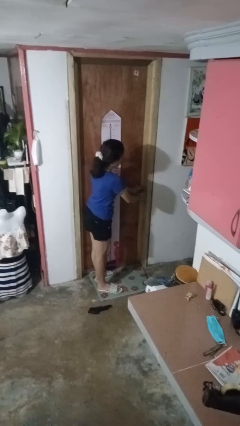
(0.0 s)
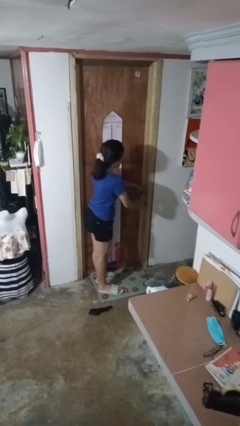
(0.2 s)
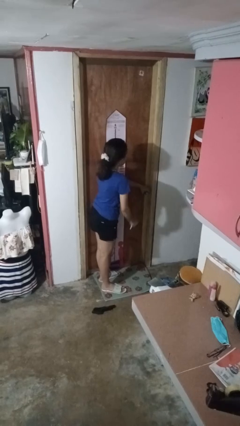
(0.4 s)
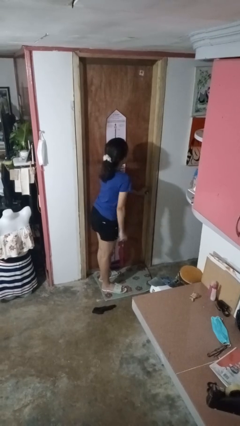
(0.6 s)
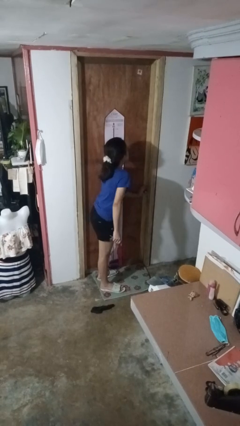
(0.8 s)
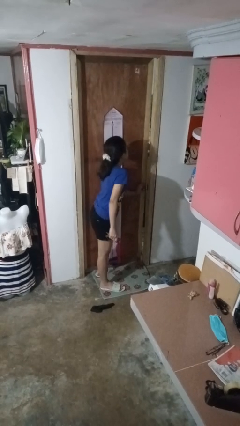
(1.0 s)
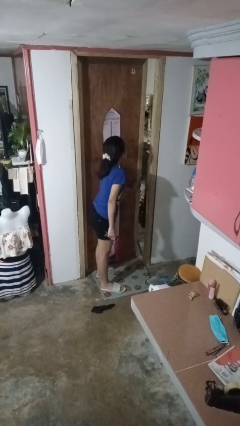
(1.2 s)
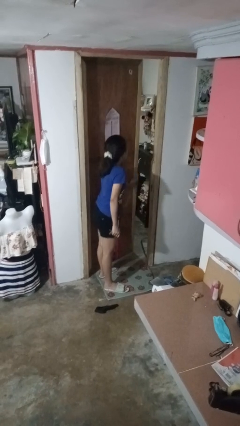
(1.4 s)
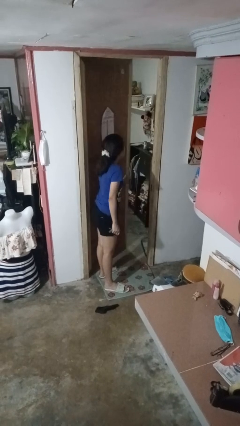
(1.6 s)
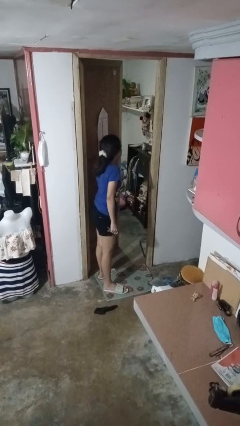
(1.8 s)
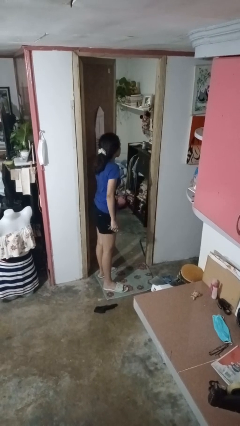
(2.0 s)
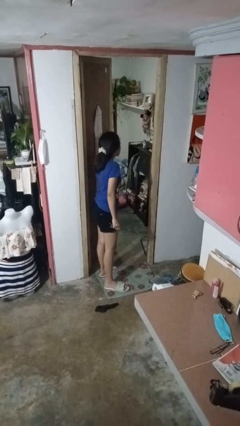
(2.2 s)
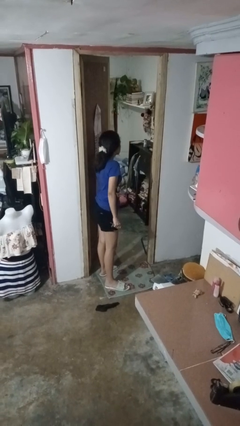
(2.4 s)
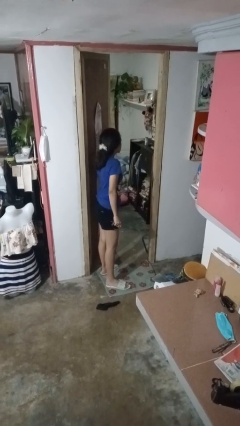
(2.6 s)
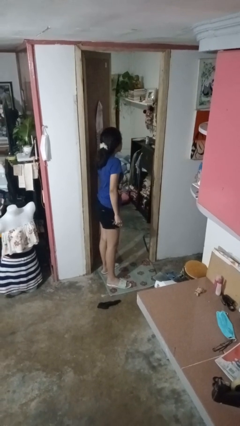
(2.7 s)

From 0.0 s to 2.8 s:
person opens facility door

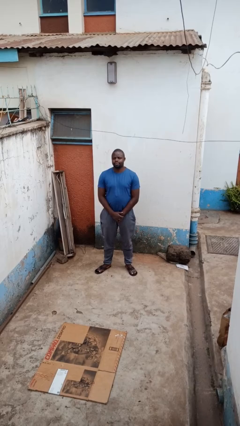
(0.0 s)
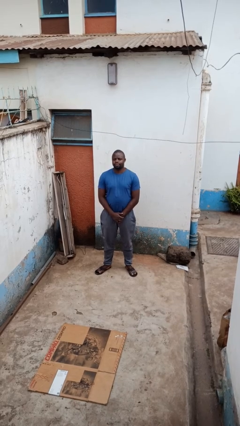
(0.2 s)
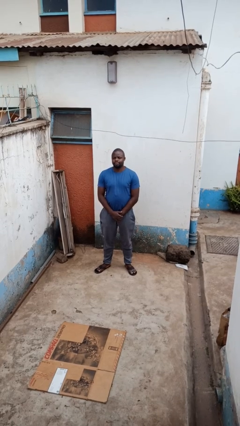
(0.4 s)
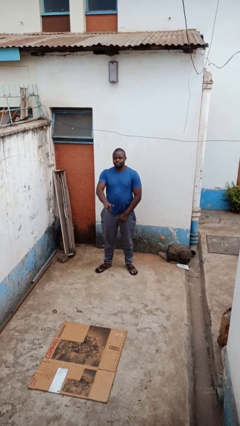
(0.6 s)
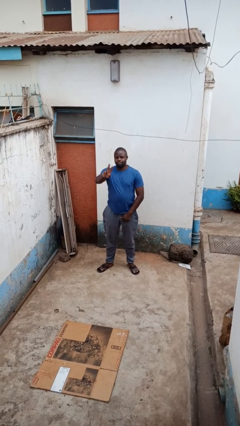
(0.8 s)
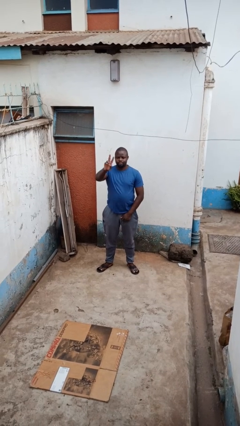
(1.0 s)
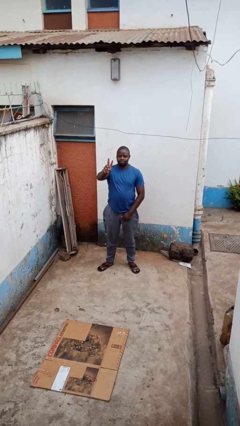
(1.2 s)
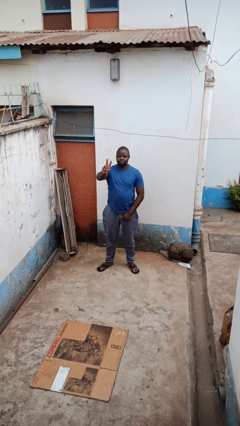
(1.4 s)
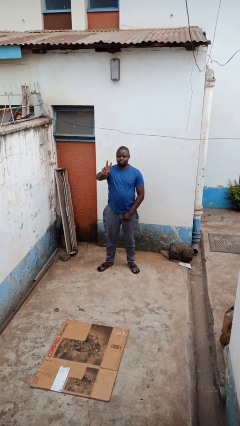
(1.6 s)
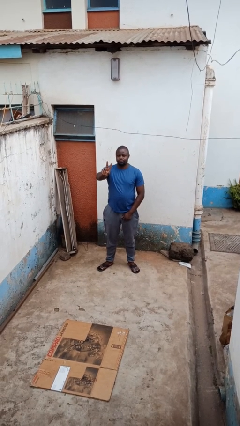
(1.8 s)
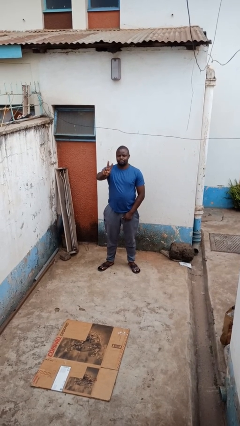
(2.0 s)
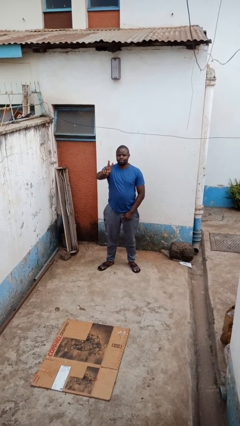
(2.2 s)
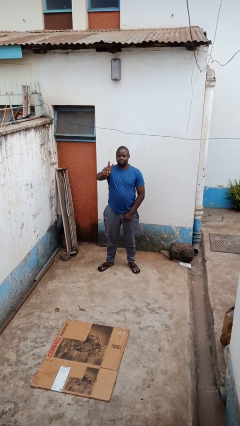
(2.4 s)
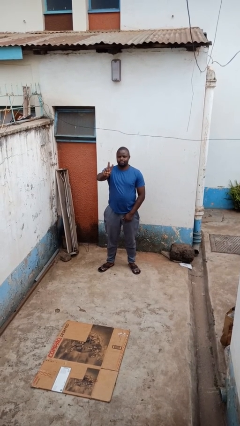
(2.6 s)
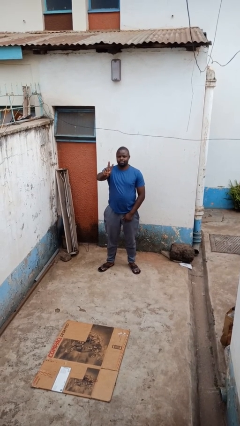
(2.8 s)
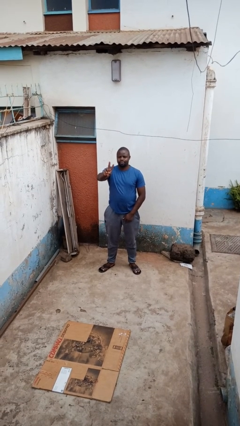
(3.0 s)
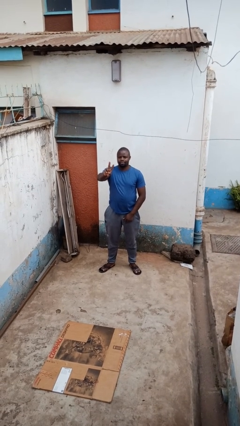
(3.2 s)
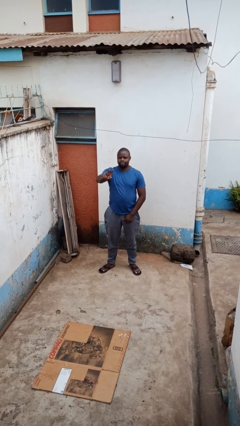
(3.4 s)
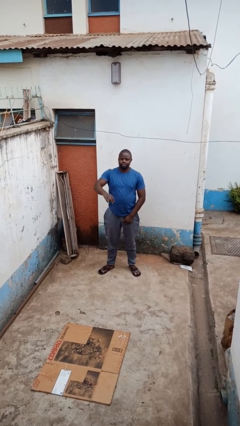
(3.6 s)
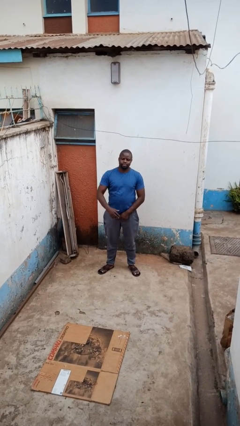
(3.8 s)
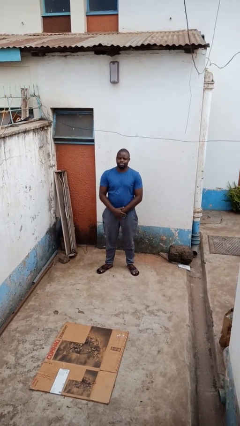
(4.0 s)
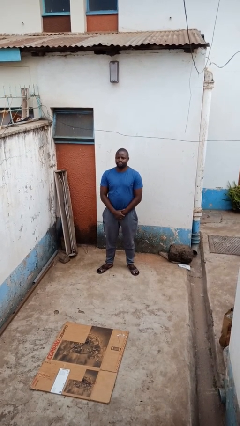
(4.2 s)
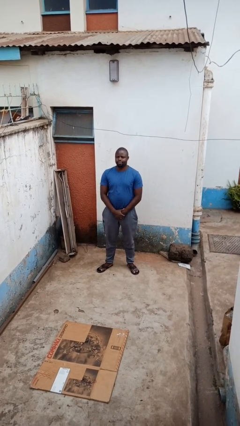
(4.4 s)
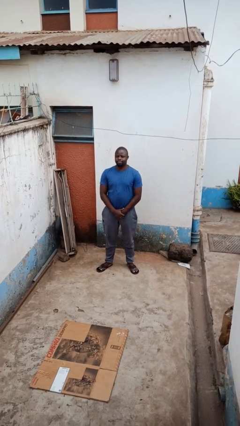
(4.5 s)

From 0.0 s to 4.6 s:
person gestures peace

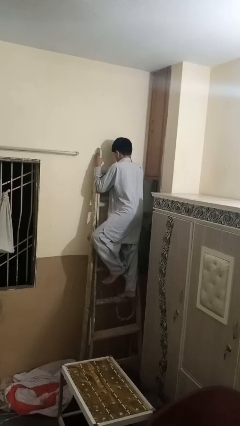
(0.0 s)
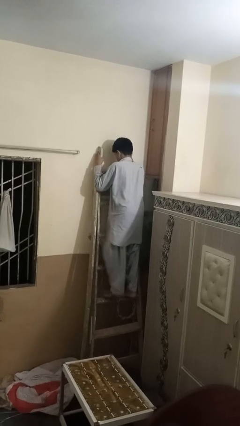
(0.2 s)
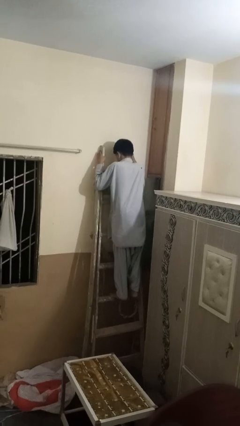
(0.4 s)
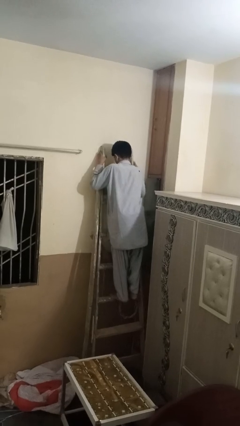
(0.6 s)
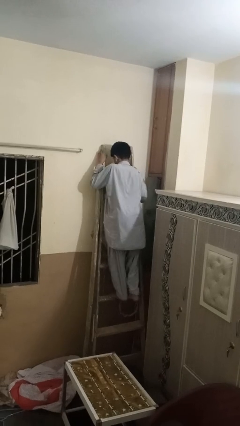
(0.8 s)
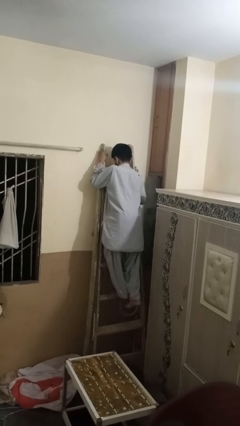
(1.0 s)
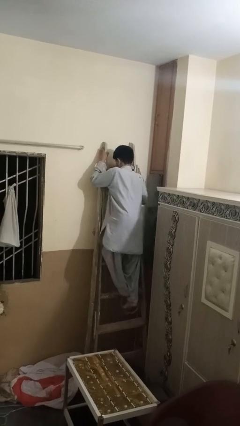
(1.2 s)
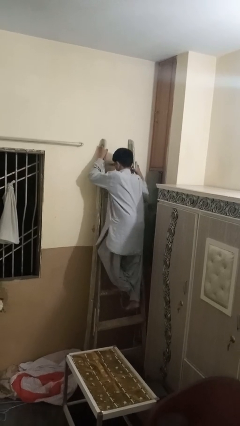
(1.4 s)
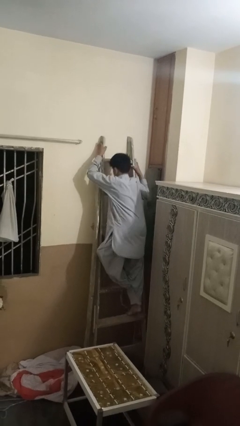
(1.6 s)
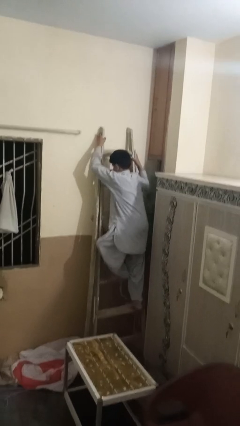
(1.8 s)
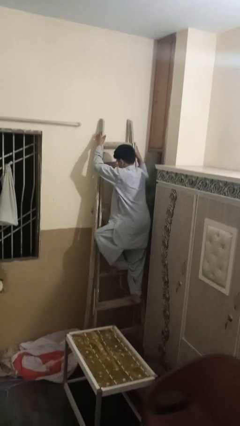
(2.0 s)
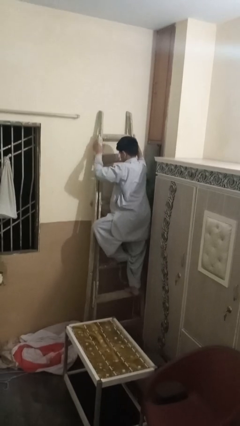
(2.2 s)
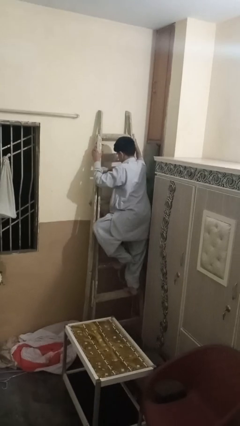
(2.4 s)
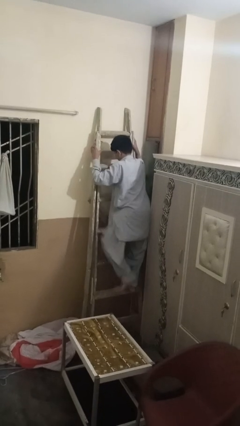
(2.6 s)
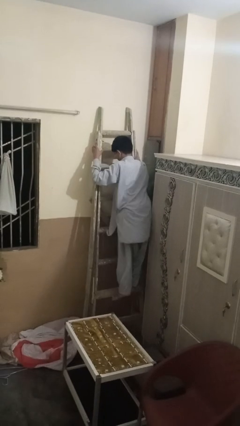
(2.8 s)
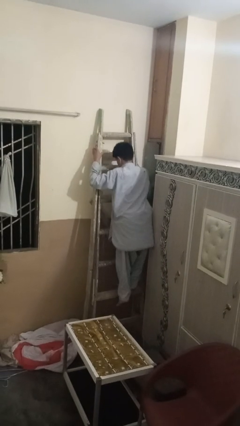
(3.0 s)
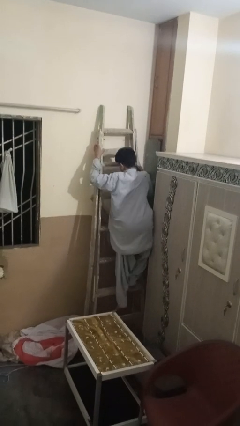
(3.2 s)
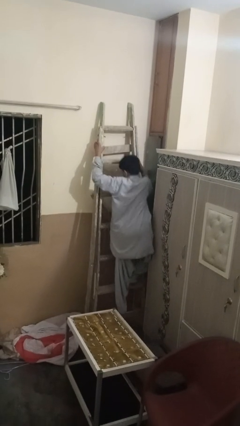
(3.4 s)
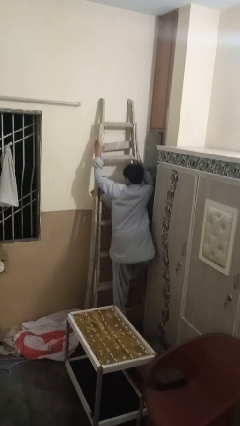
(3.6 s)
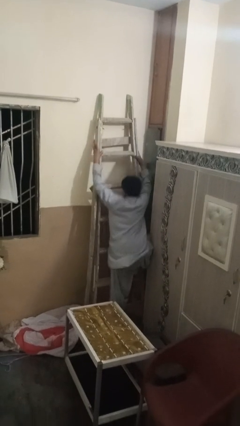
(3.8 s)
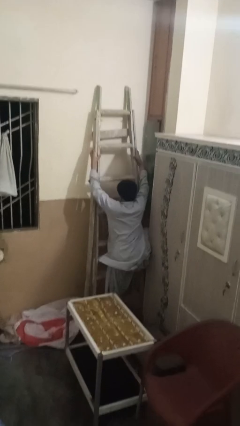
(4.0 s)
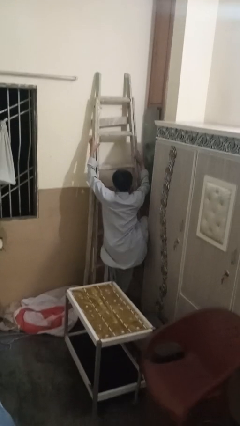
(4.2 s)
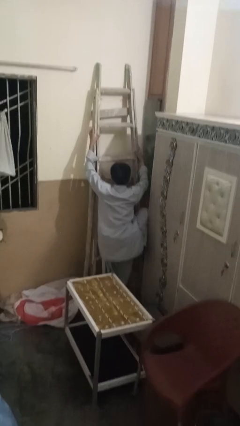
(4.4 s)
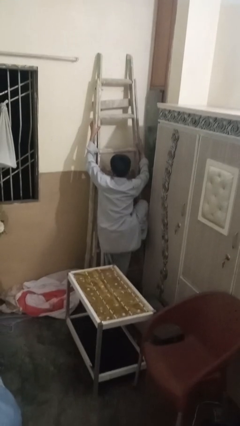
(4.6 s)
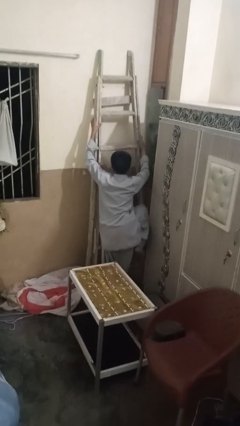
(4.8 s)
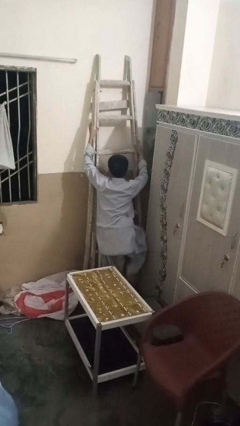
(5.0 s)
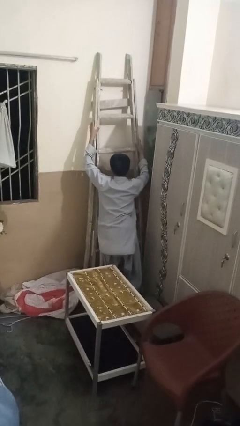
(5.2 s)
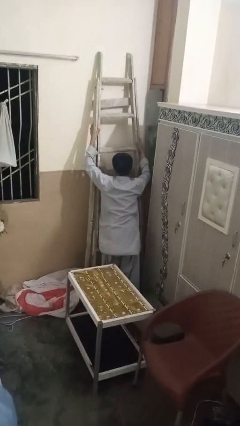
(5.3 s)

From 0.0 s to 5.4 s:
person climbs down ladder

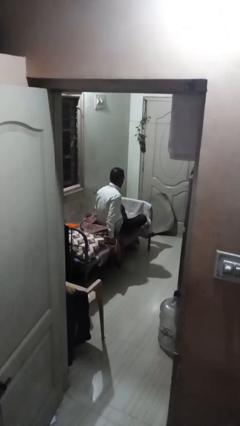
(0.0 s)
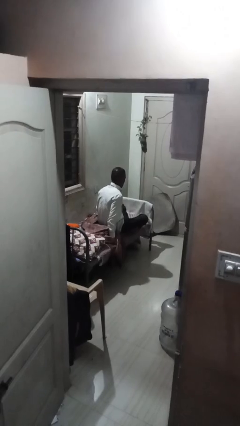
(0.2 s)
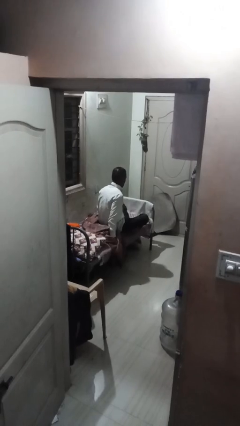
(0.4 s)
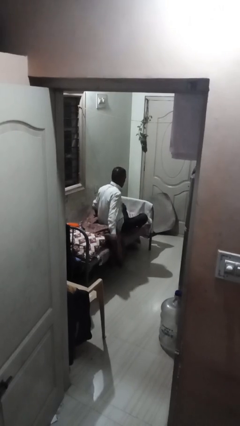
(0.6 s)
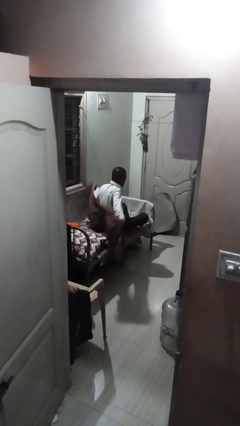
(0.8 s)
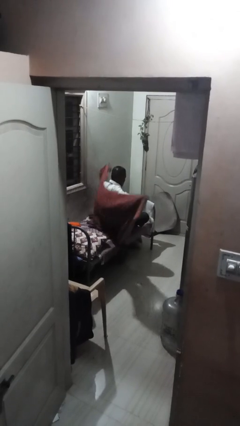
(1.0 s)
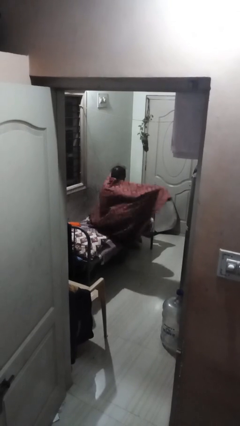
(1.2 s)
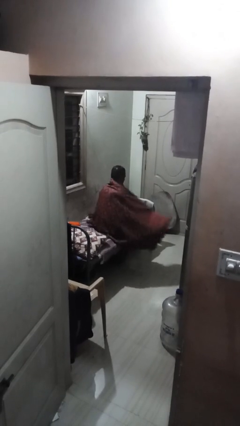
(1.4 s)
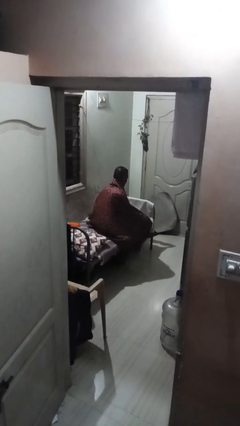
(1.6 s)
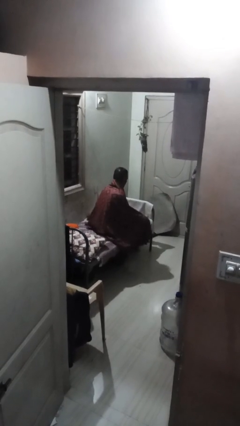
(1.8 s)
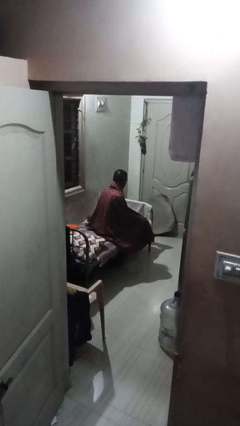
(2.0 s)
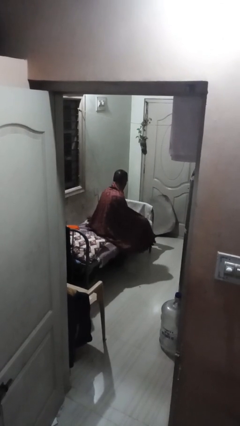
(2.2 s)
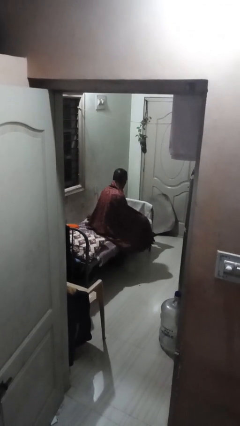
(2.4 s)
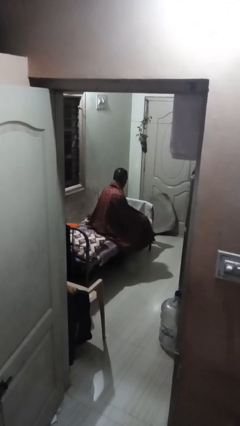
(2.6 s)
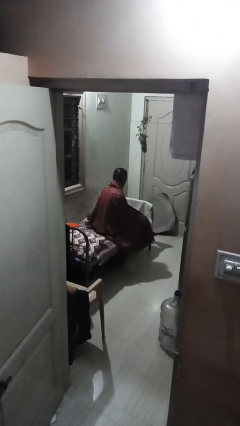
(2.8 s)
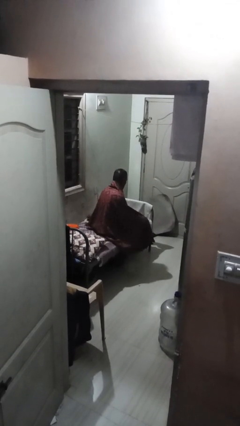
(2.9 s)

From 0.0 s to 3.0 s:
person covers with blanket

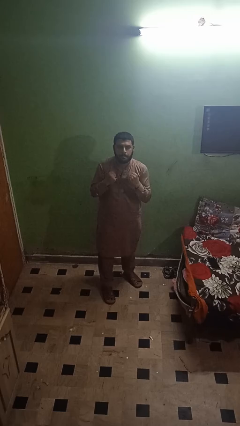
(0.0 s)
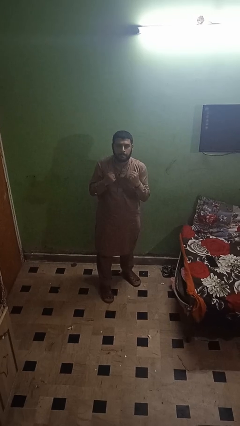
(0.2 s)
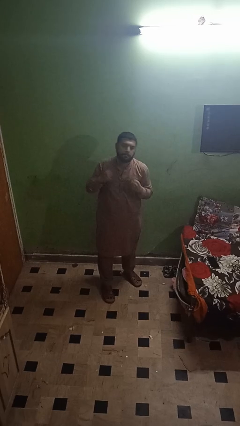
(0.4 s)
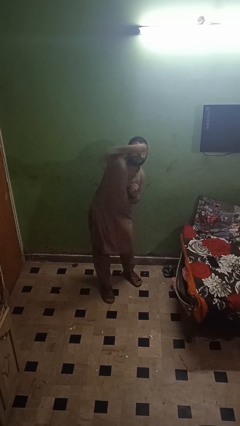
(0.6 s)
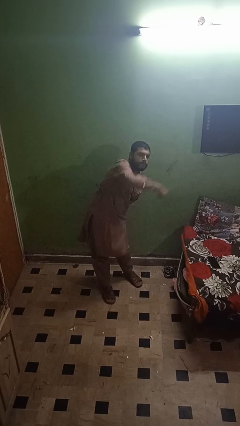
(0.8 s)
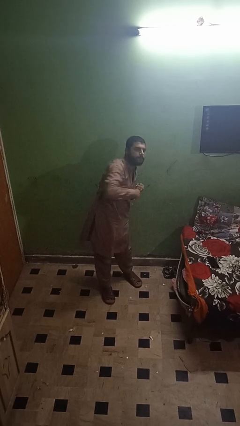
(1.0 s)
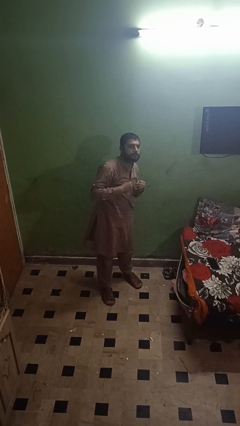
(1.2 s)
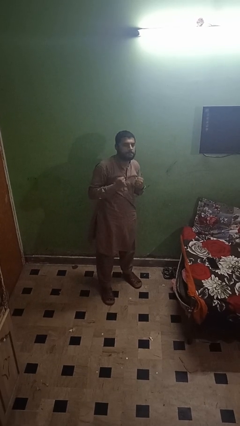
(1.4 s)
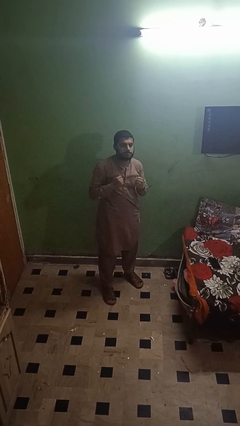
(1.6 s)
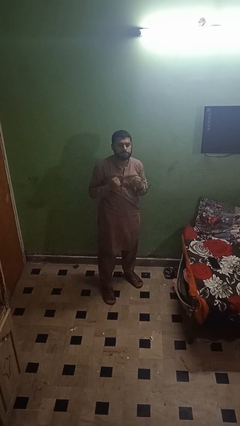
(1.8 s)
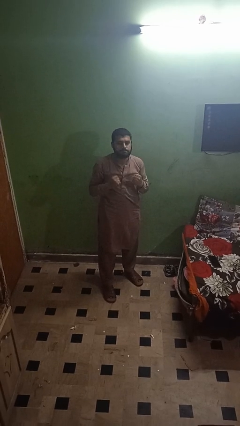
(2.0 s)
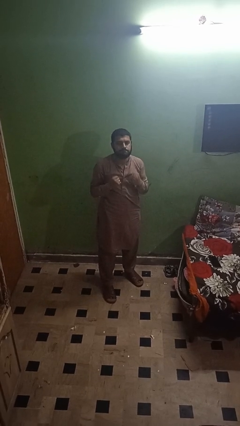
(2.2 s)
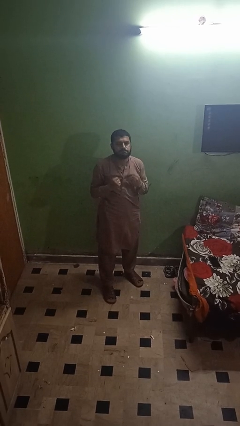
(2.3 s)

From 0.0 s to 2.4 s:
person punches
